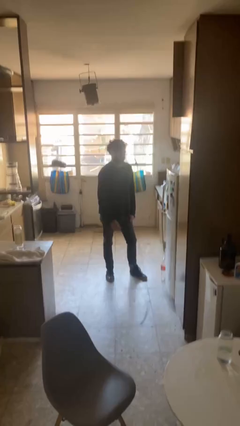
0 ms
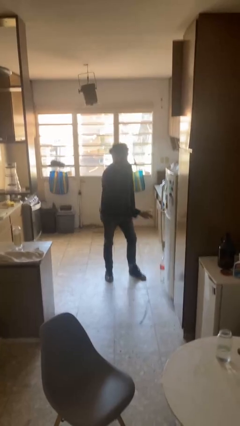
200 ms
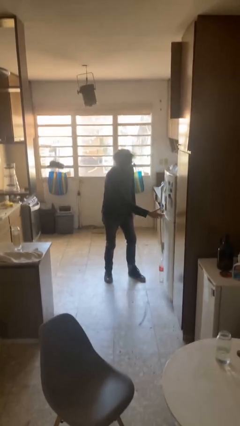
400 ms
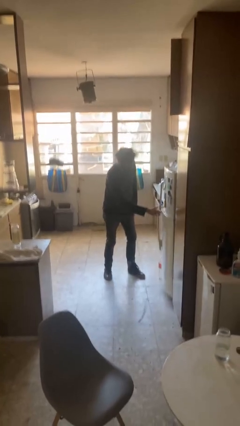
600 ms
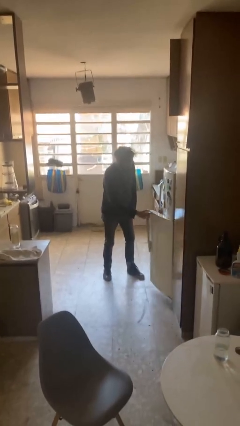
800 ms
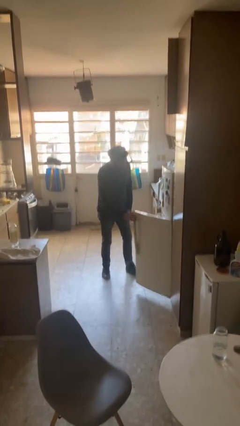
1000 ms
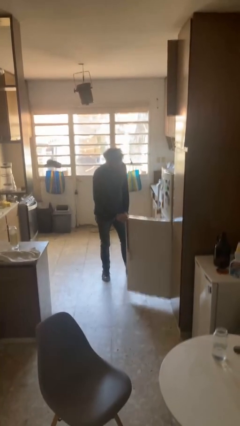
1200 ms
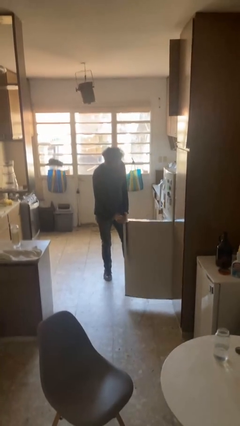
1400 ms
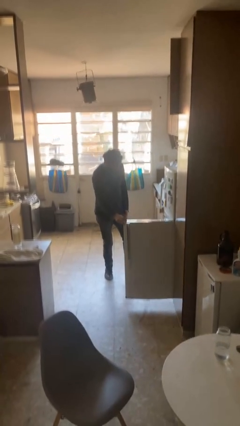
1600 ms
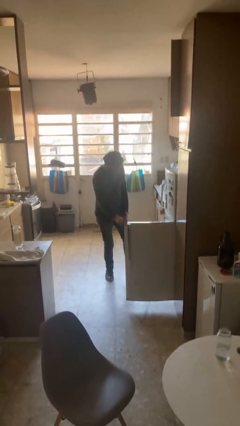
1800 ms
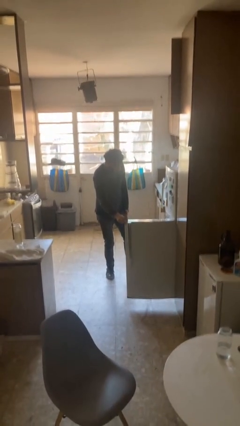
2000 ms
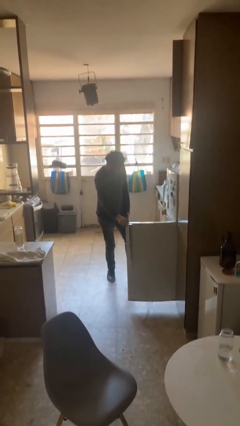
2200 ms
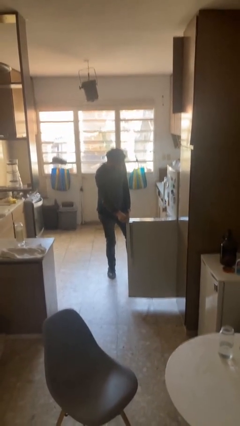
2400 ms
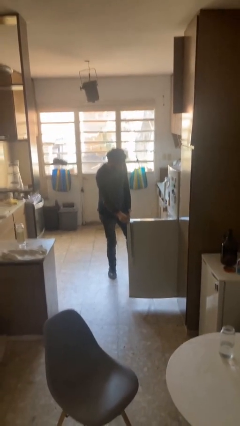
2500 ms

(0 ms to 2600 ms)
person opens refrigerator

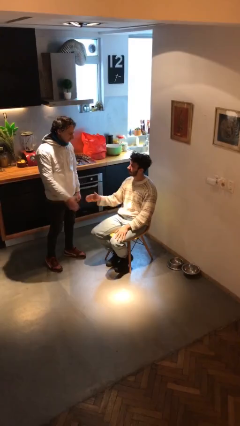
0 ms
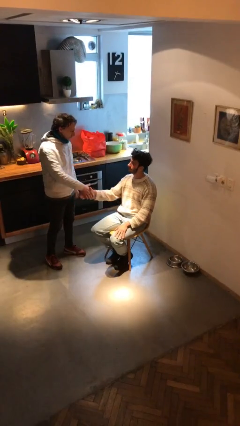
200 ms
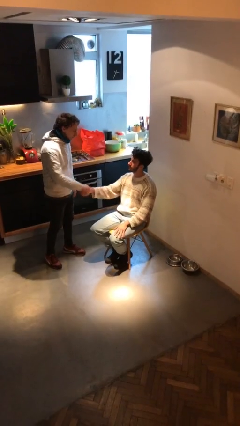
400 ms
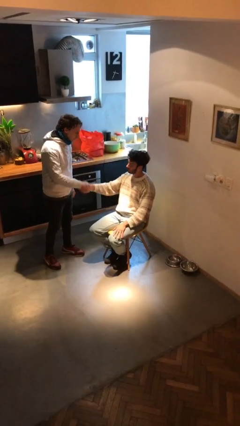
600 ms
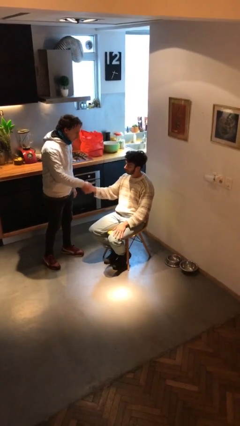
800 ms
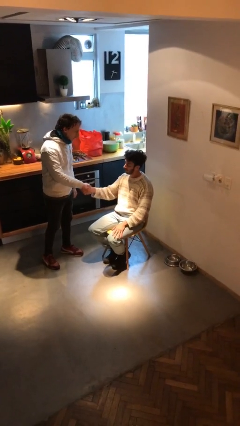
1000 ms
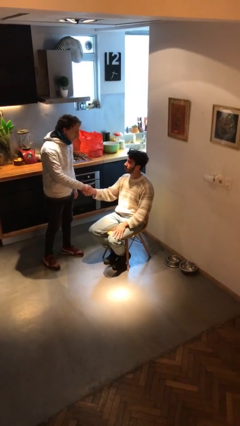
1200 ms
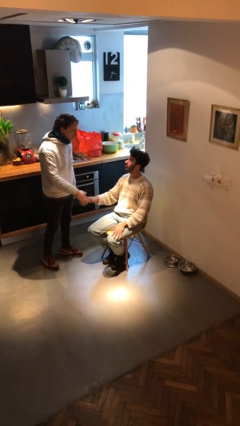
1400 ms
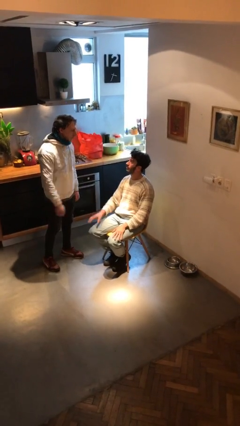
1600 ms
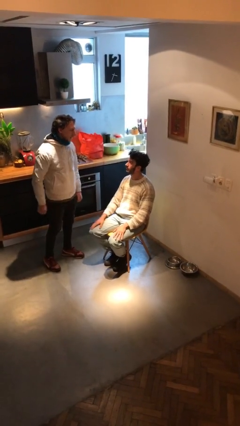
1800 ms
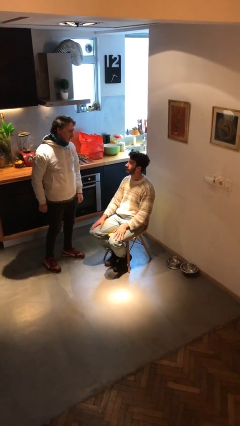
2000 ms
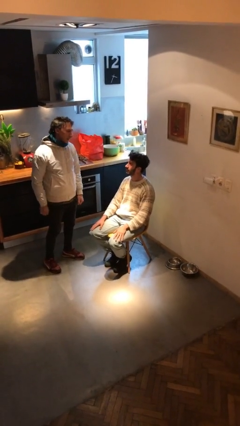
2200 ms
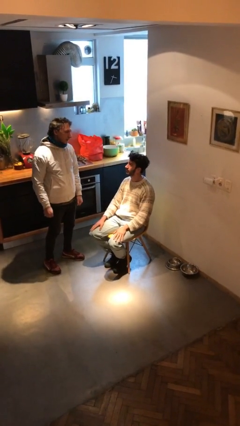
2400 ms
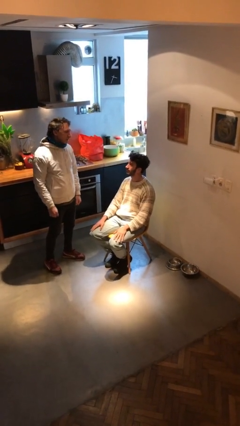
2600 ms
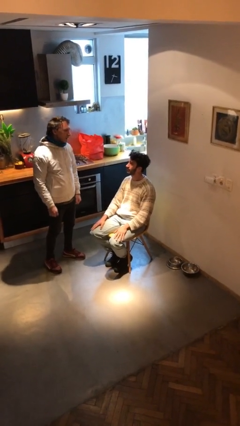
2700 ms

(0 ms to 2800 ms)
person shakes hand

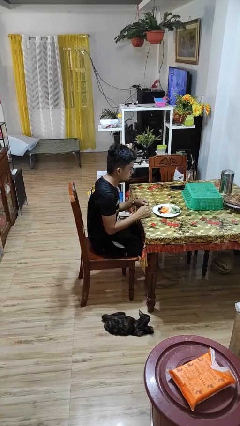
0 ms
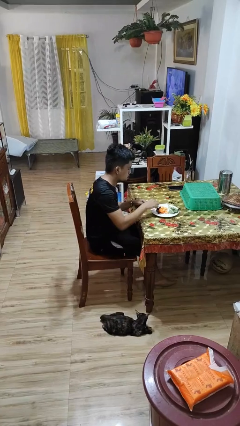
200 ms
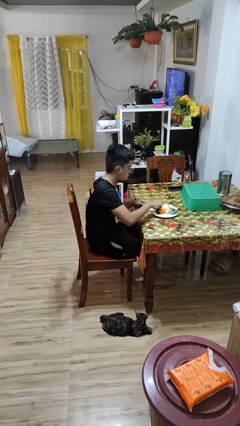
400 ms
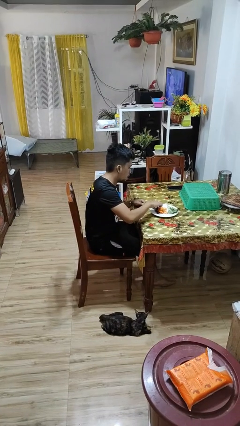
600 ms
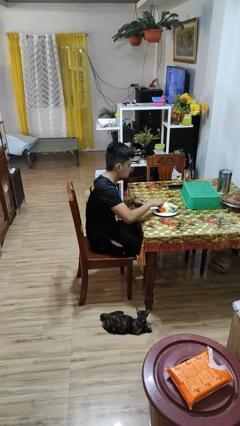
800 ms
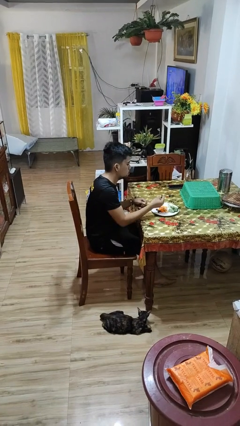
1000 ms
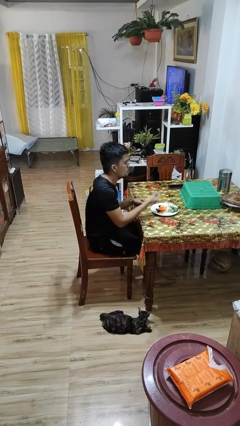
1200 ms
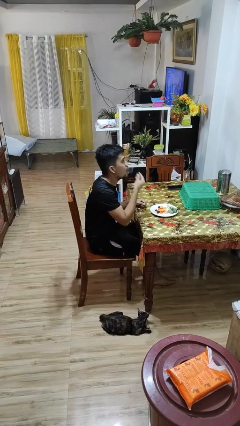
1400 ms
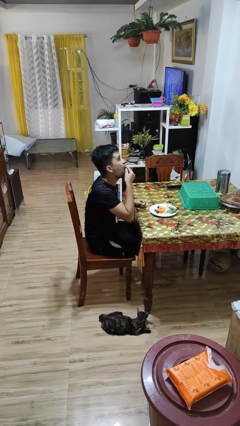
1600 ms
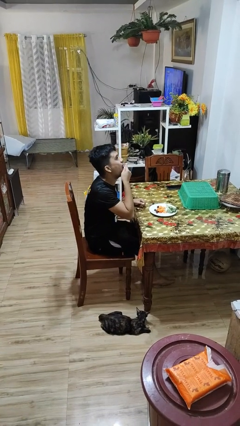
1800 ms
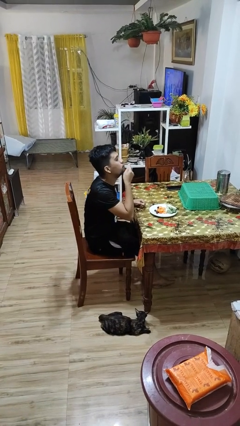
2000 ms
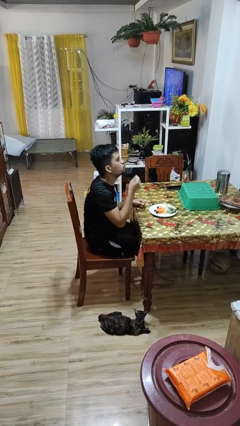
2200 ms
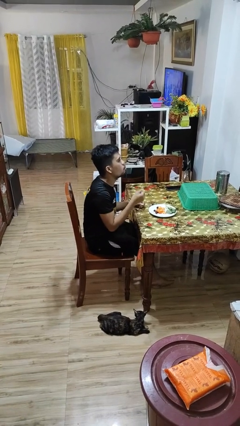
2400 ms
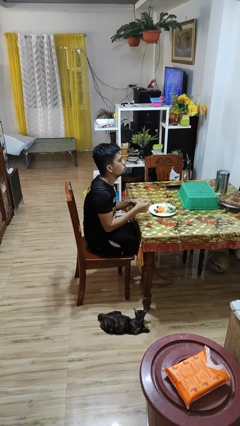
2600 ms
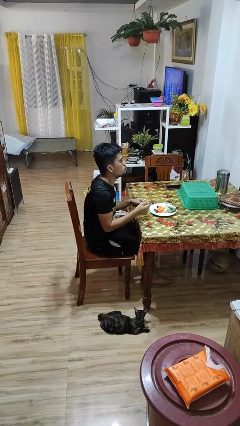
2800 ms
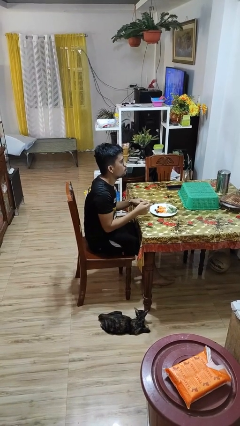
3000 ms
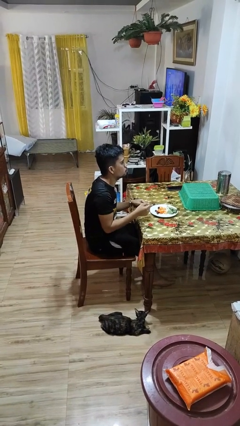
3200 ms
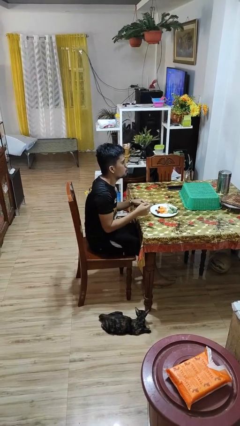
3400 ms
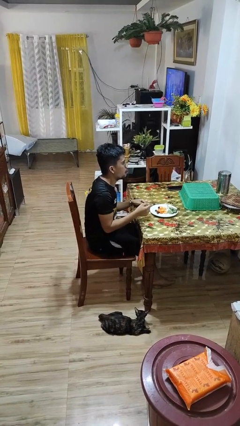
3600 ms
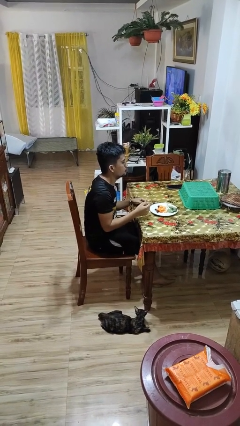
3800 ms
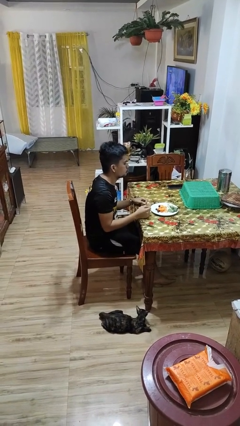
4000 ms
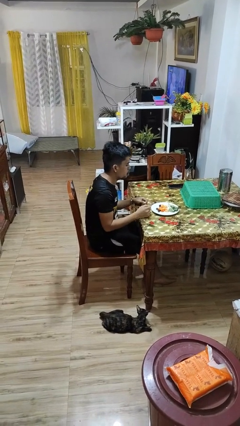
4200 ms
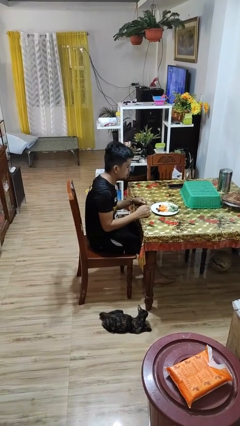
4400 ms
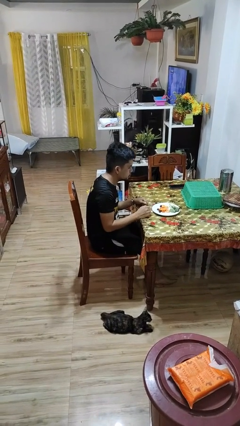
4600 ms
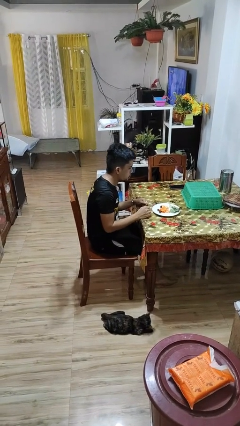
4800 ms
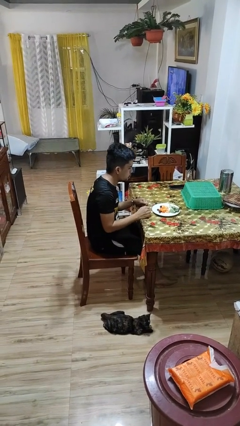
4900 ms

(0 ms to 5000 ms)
person eats with hands

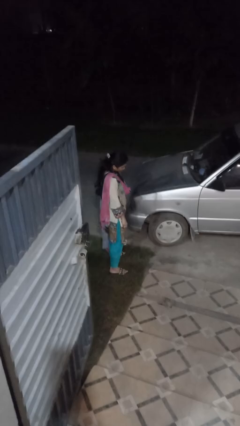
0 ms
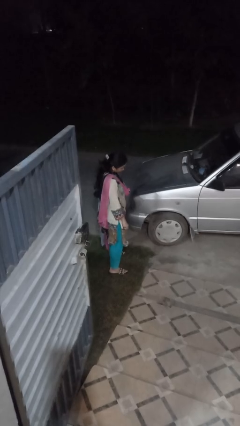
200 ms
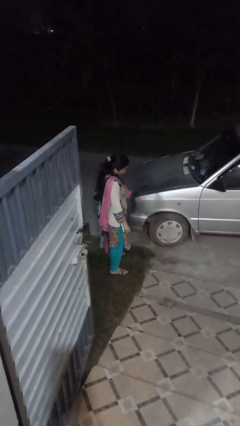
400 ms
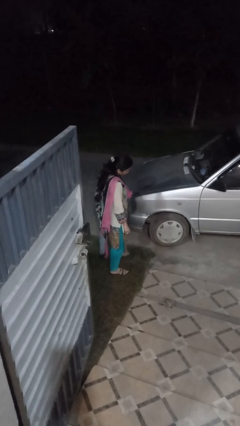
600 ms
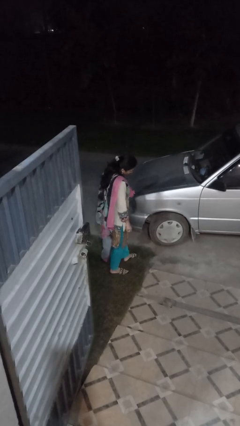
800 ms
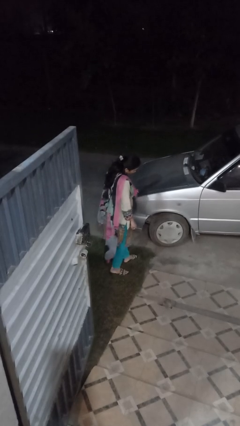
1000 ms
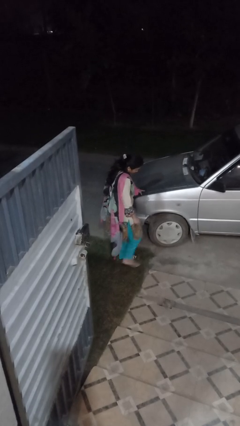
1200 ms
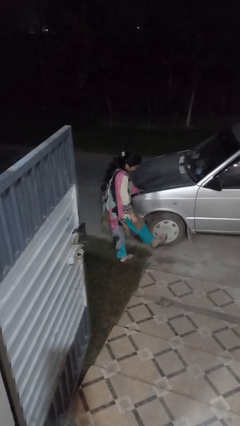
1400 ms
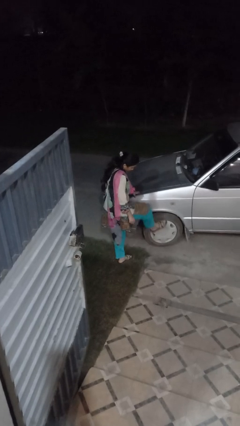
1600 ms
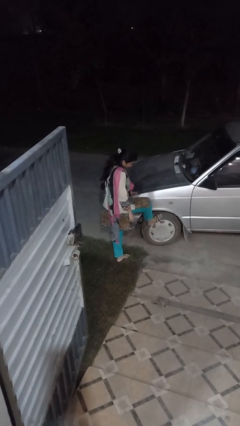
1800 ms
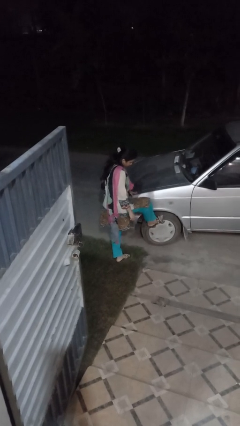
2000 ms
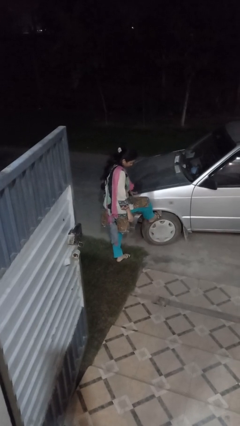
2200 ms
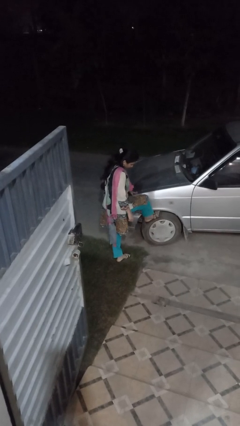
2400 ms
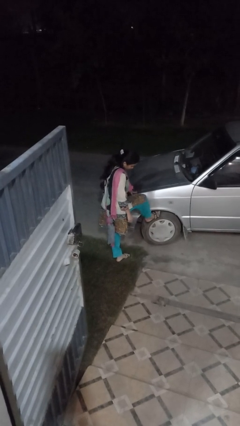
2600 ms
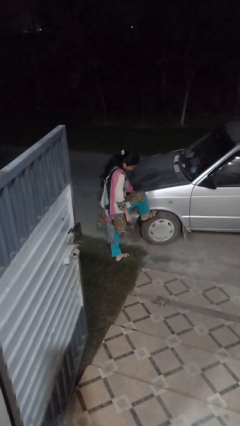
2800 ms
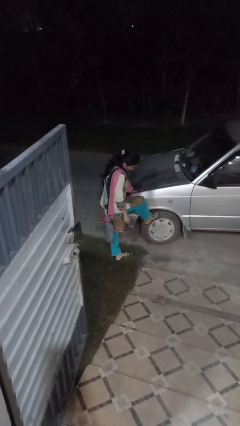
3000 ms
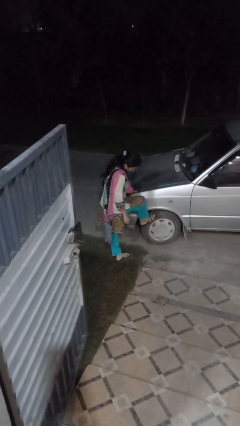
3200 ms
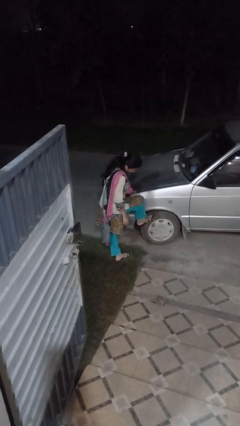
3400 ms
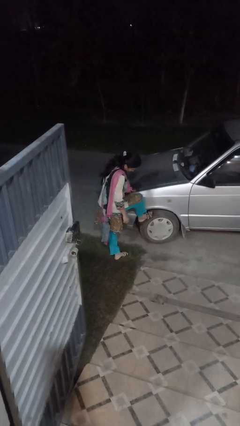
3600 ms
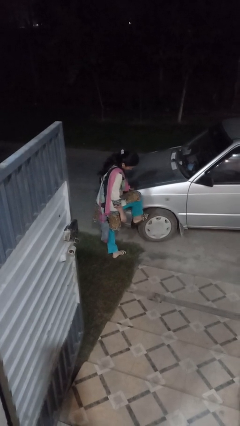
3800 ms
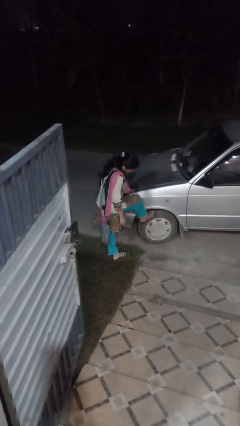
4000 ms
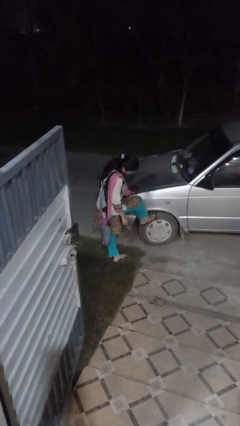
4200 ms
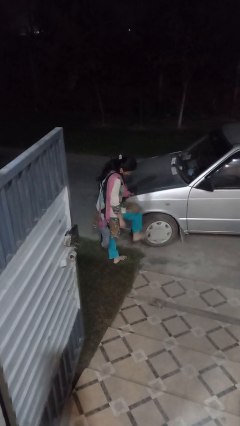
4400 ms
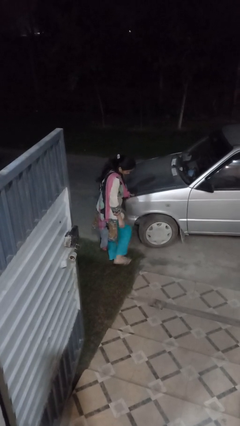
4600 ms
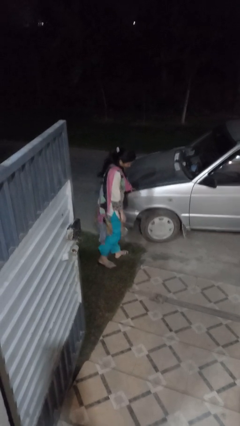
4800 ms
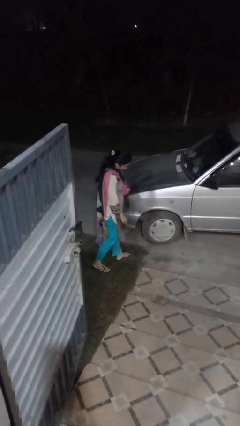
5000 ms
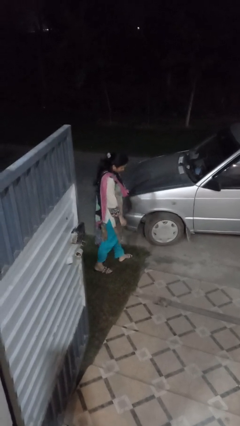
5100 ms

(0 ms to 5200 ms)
person kicks car tires

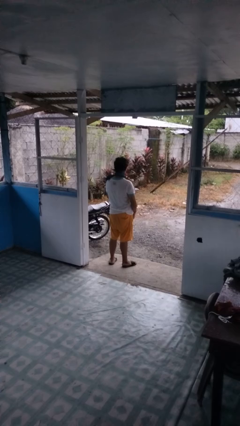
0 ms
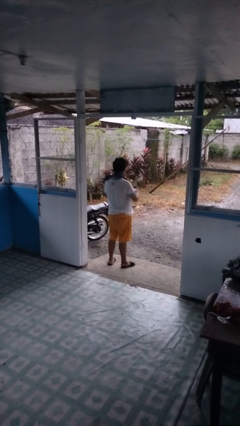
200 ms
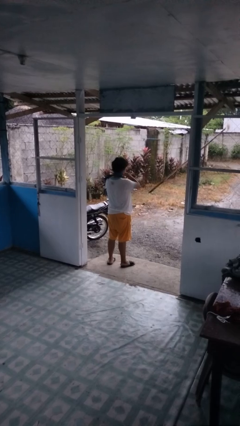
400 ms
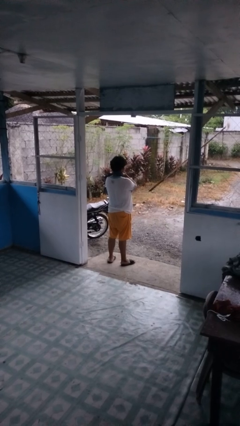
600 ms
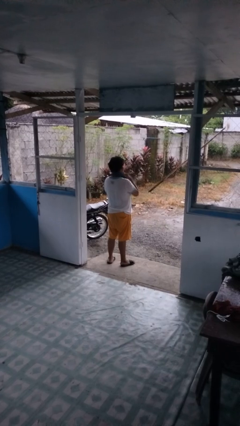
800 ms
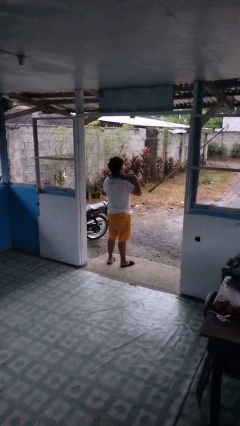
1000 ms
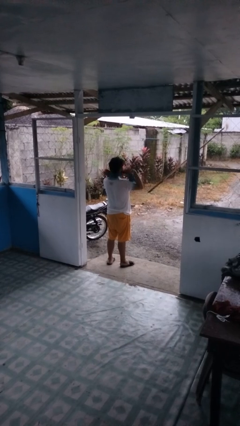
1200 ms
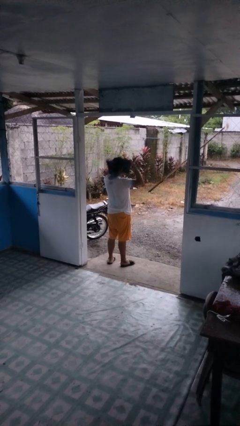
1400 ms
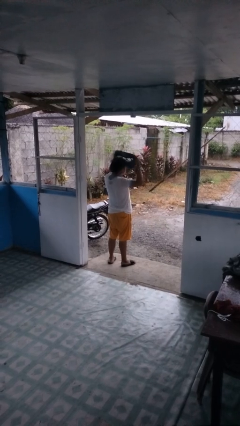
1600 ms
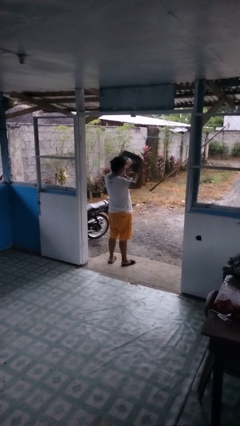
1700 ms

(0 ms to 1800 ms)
person takes off scarf

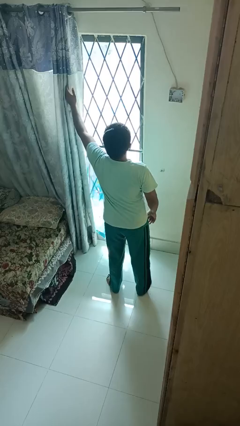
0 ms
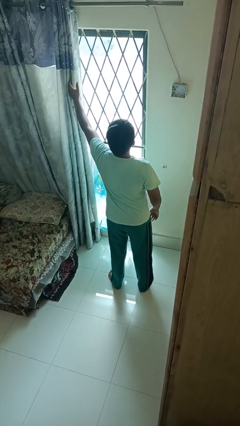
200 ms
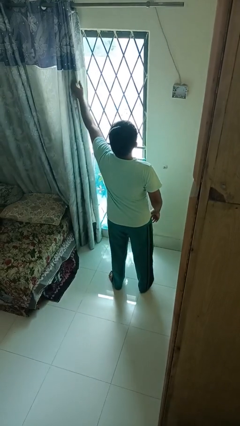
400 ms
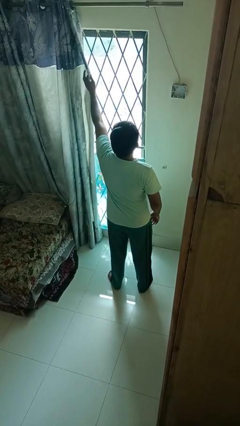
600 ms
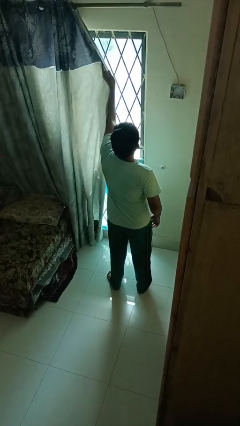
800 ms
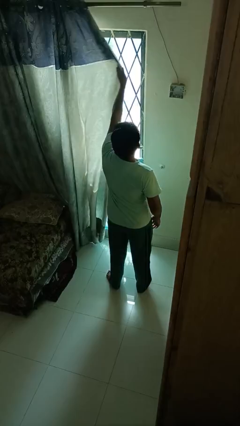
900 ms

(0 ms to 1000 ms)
person closes curtains
